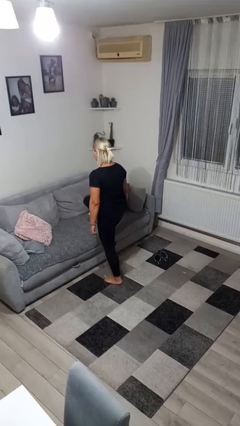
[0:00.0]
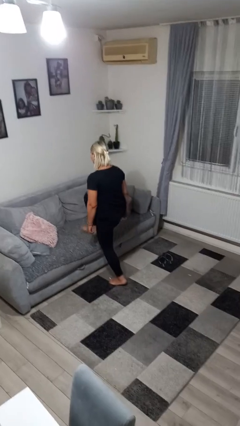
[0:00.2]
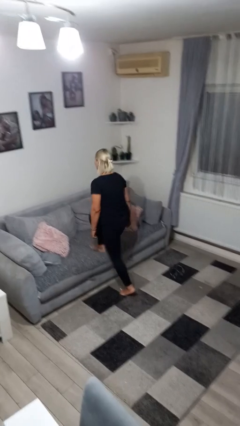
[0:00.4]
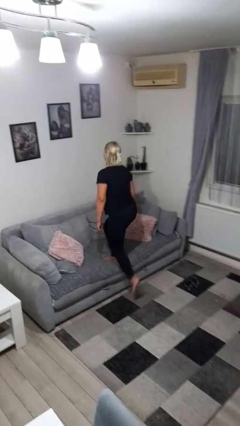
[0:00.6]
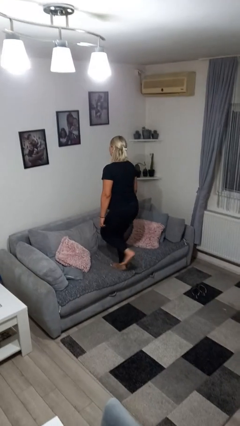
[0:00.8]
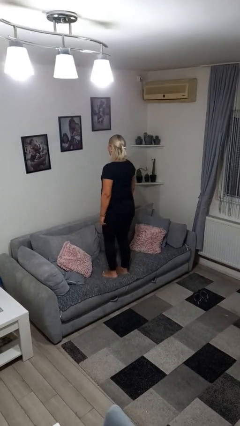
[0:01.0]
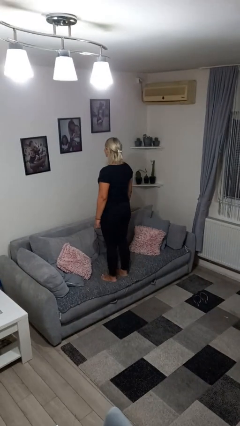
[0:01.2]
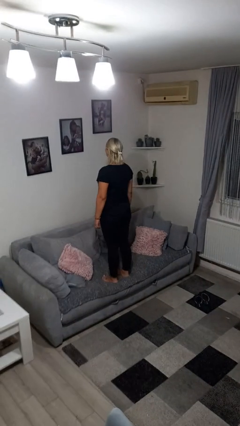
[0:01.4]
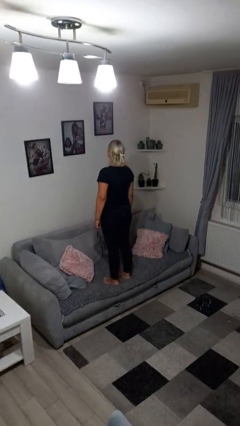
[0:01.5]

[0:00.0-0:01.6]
person climbs on couch

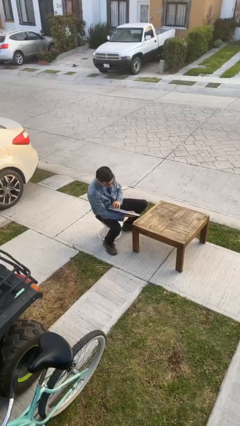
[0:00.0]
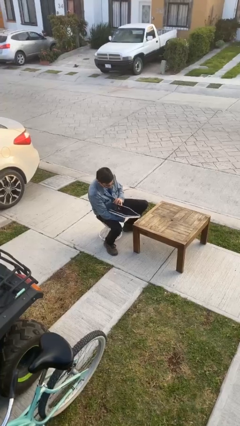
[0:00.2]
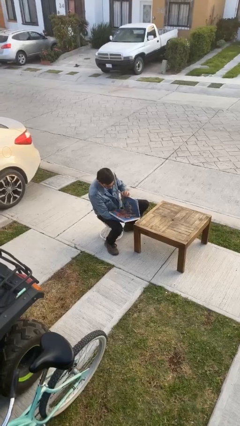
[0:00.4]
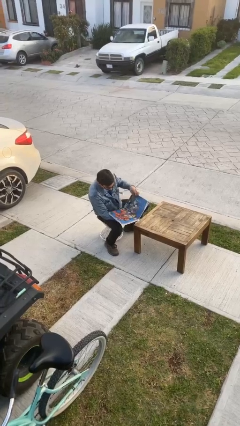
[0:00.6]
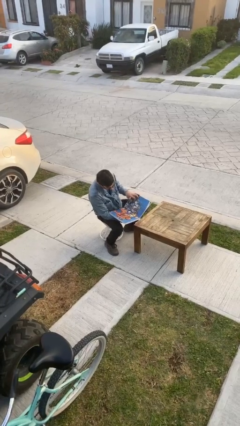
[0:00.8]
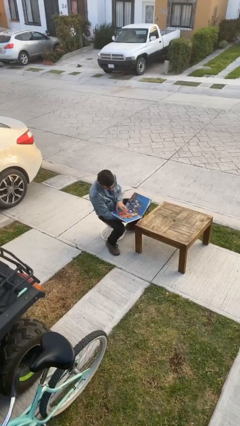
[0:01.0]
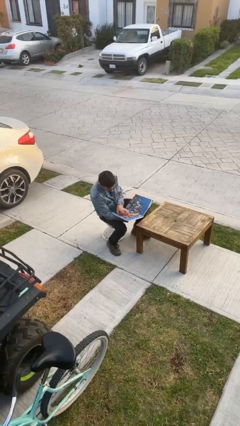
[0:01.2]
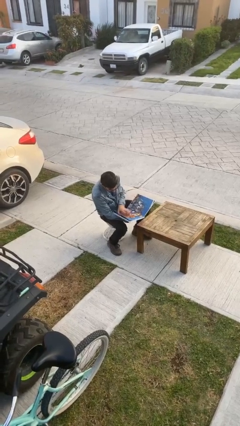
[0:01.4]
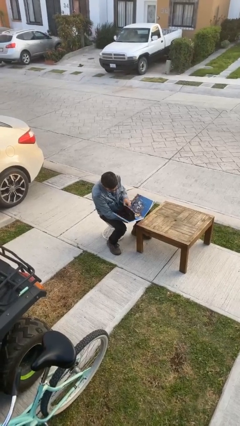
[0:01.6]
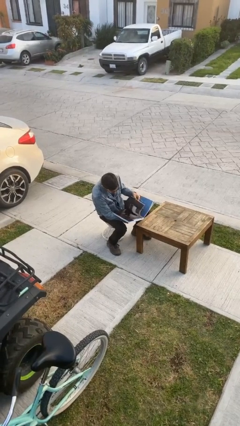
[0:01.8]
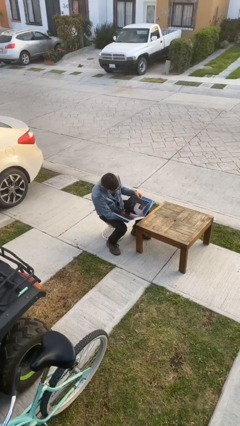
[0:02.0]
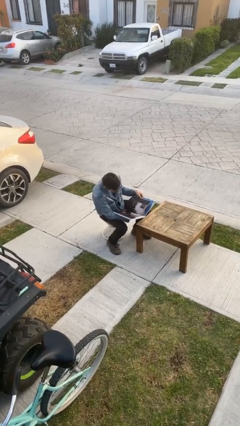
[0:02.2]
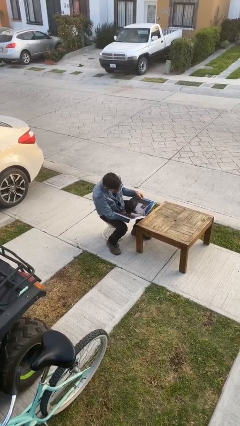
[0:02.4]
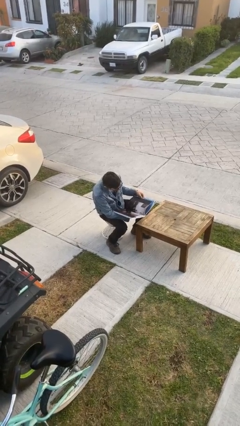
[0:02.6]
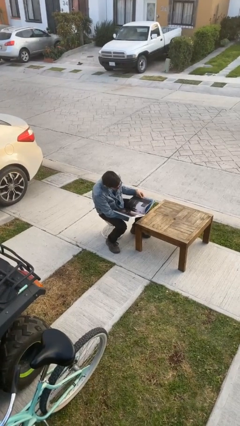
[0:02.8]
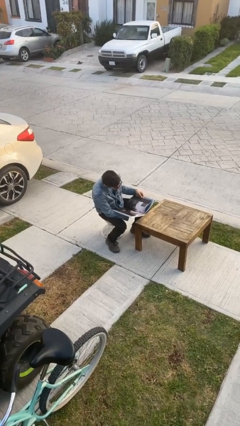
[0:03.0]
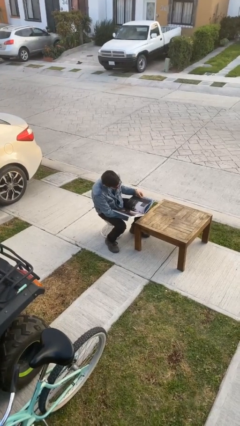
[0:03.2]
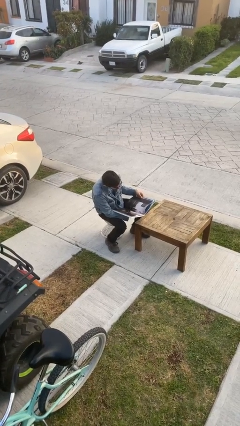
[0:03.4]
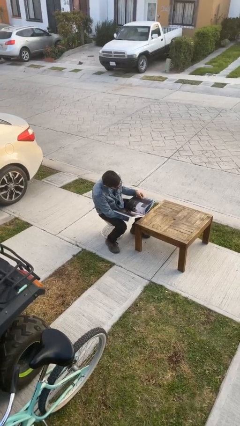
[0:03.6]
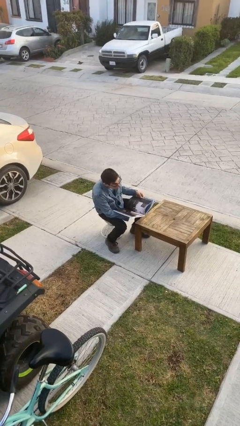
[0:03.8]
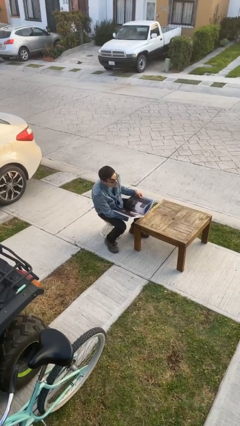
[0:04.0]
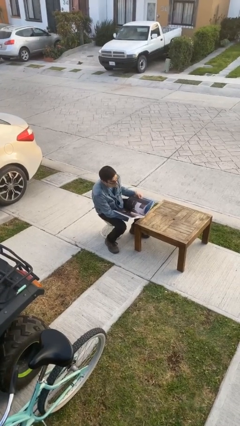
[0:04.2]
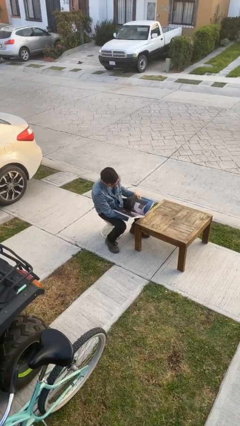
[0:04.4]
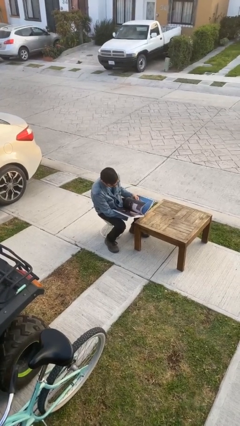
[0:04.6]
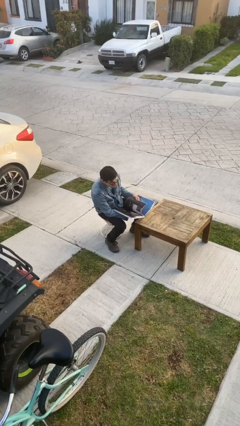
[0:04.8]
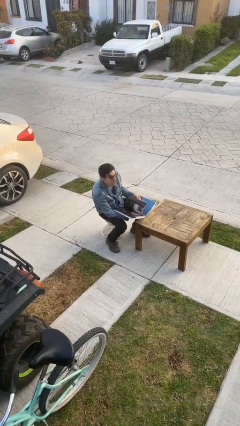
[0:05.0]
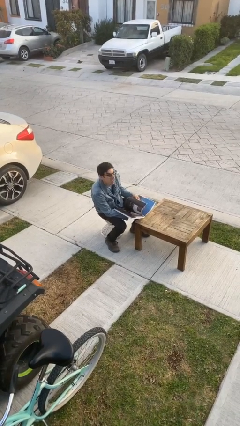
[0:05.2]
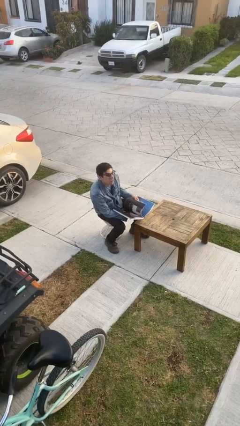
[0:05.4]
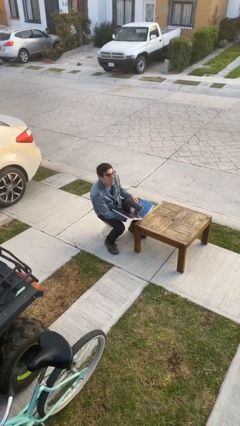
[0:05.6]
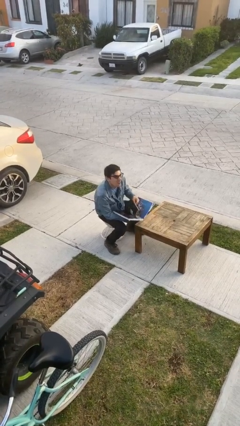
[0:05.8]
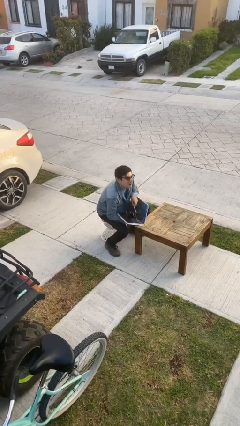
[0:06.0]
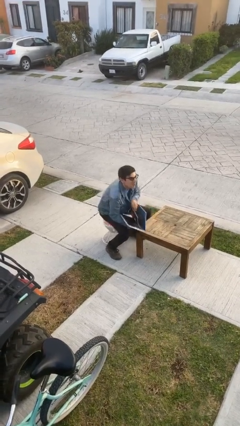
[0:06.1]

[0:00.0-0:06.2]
person reads document

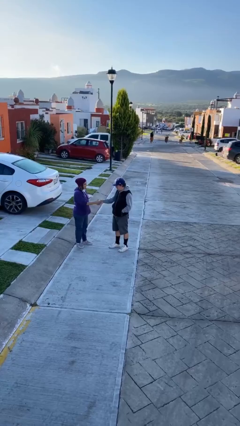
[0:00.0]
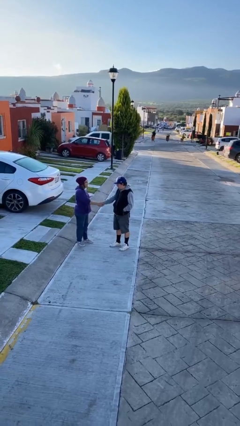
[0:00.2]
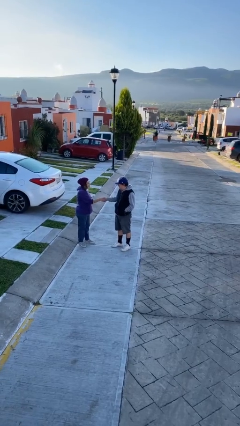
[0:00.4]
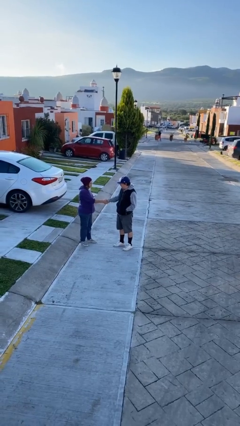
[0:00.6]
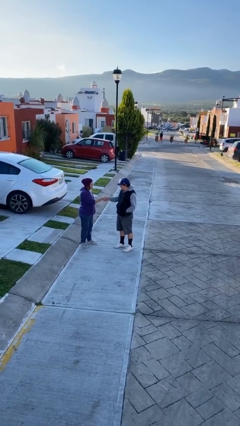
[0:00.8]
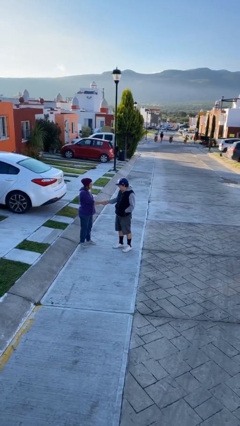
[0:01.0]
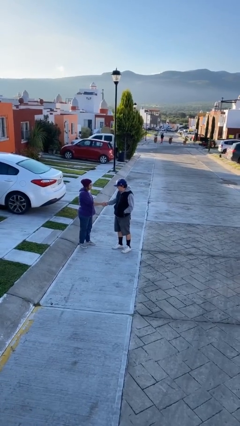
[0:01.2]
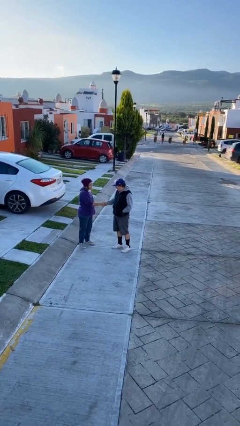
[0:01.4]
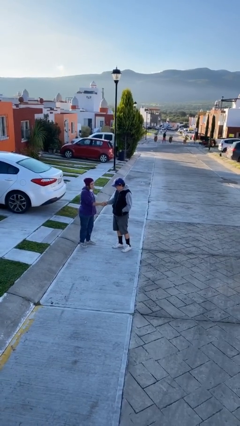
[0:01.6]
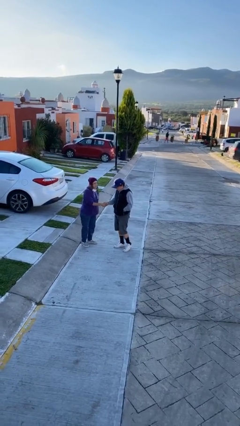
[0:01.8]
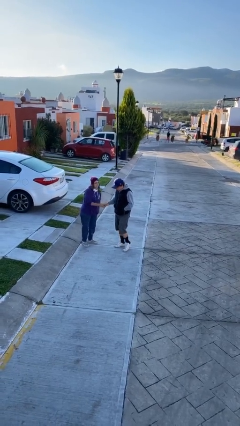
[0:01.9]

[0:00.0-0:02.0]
person shakes hand

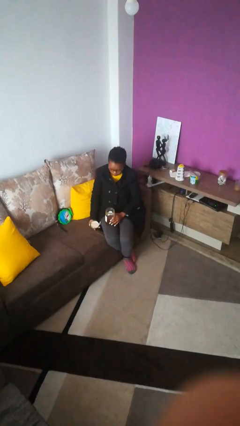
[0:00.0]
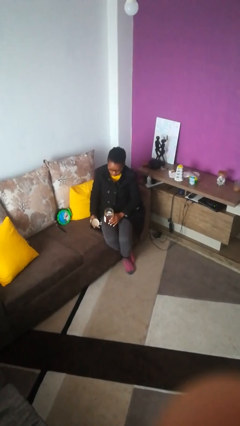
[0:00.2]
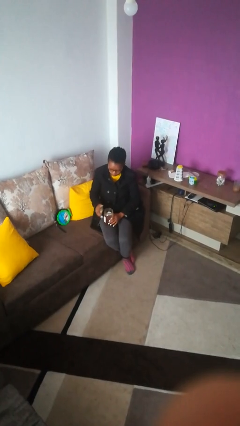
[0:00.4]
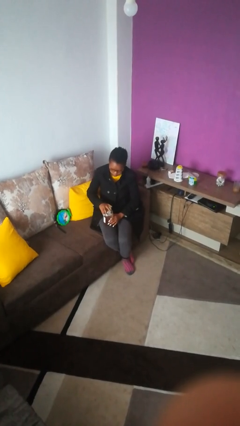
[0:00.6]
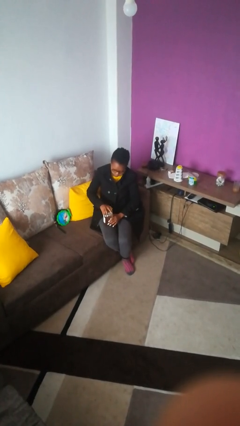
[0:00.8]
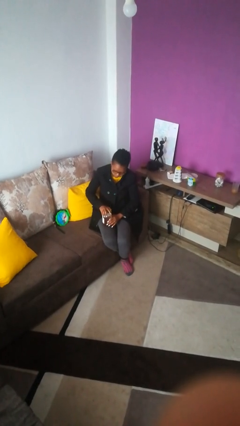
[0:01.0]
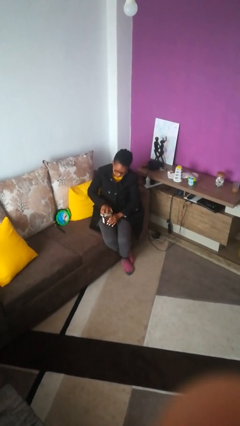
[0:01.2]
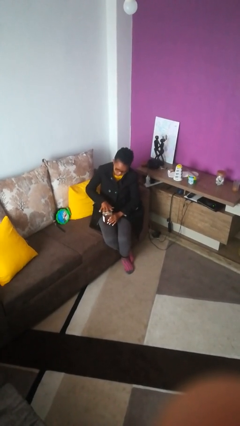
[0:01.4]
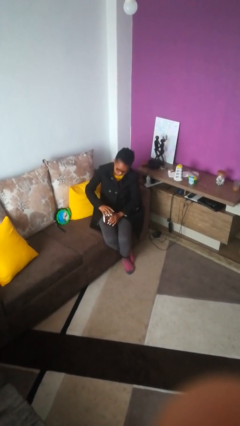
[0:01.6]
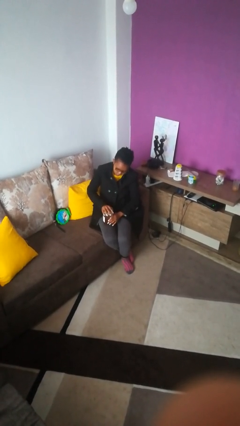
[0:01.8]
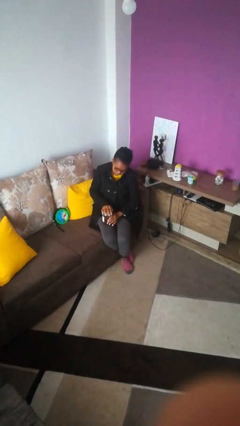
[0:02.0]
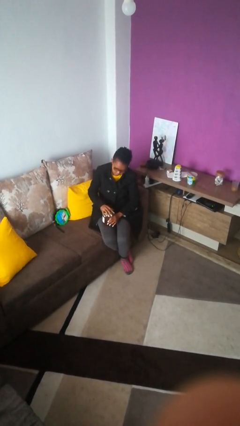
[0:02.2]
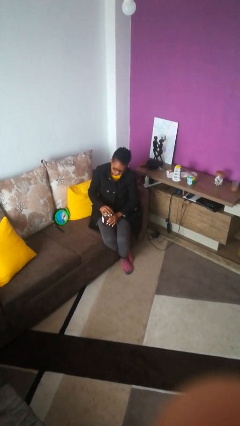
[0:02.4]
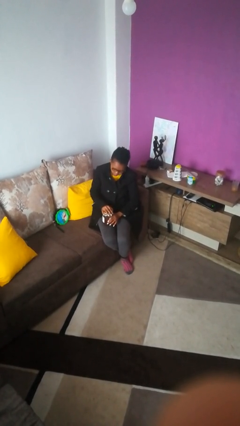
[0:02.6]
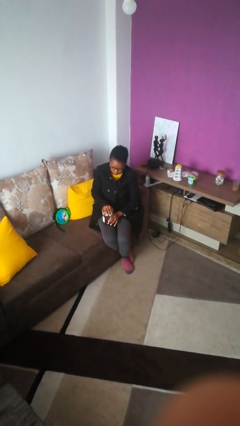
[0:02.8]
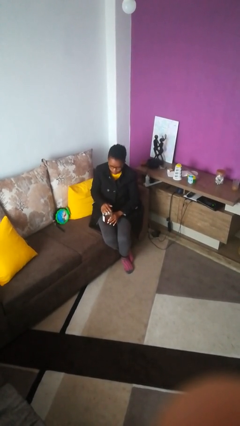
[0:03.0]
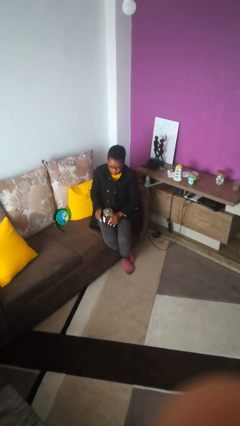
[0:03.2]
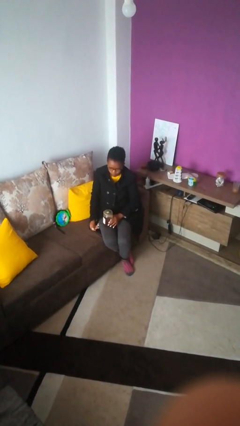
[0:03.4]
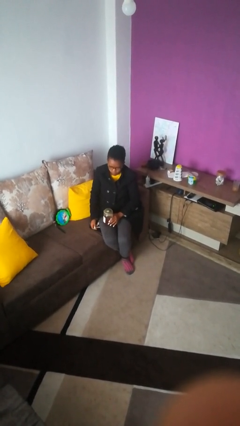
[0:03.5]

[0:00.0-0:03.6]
person closes jar

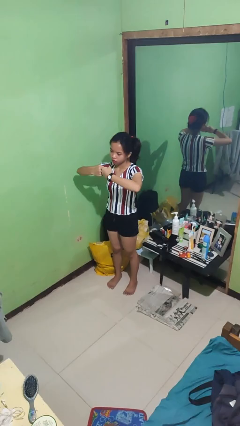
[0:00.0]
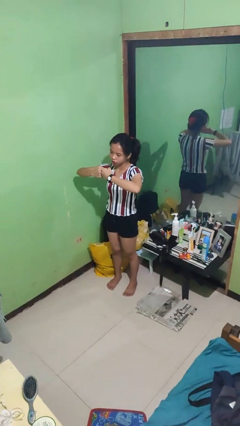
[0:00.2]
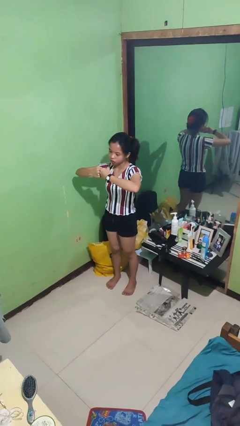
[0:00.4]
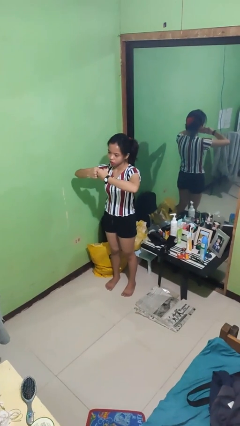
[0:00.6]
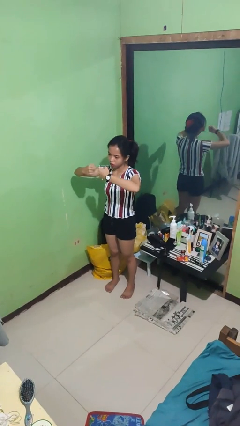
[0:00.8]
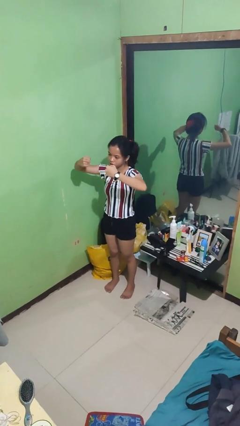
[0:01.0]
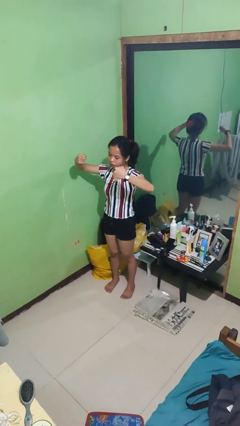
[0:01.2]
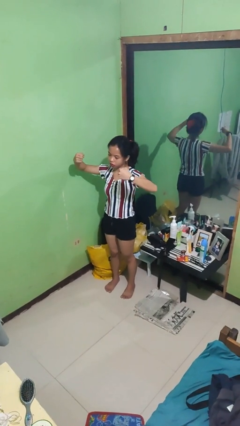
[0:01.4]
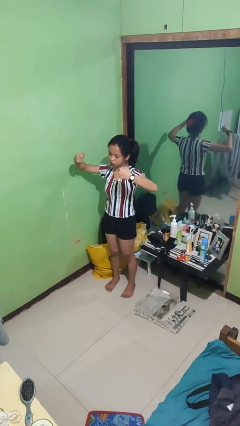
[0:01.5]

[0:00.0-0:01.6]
person gestures zoom in

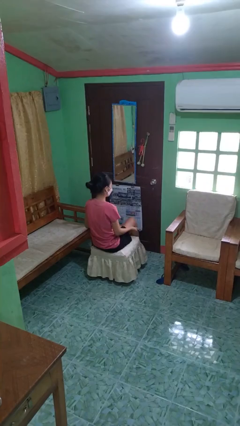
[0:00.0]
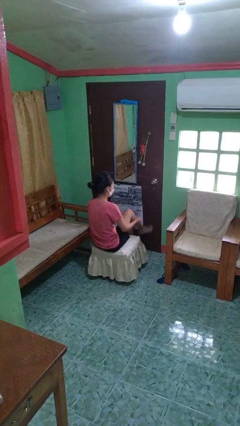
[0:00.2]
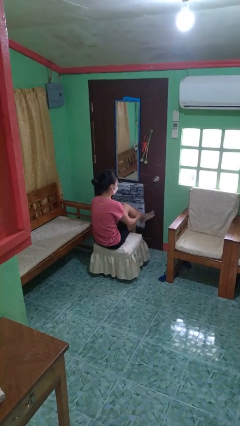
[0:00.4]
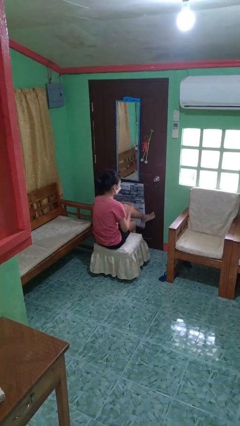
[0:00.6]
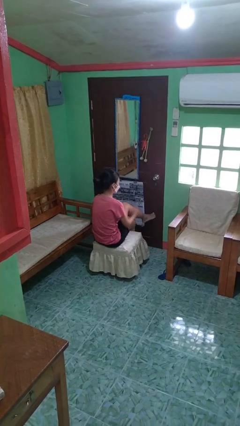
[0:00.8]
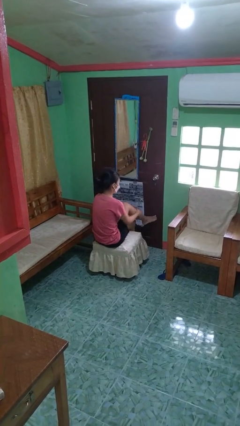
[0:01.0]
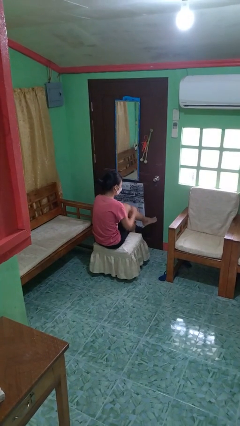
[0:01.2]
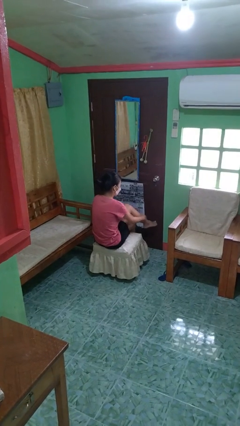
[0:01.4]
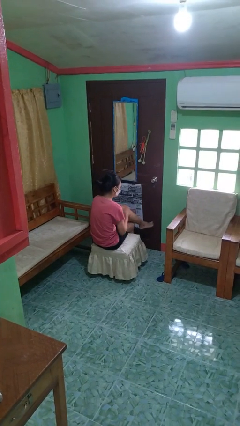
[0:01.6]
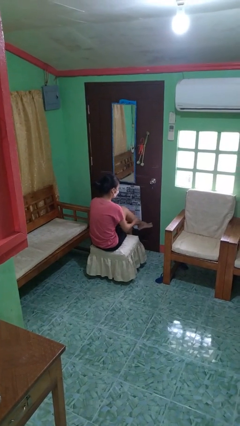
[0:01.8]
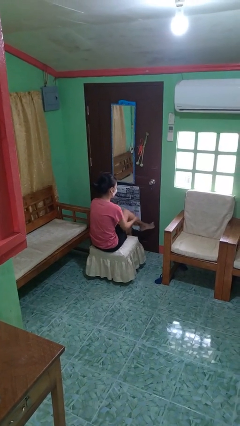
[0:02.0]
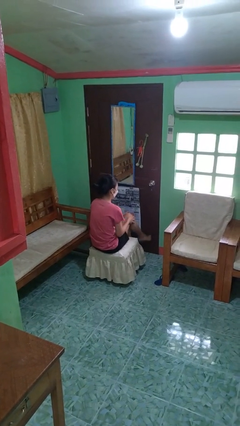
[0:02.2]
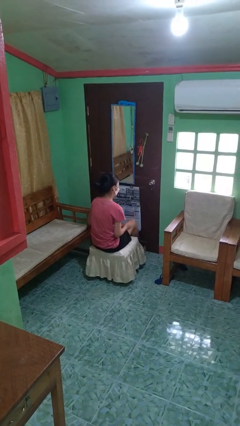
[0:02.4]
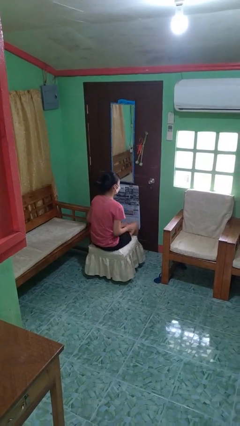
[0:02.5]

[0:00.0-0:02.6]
person applies sunscreen
